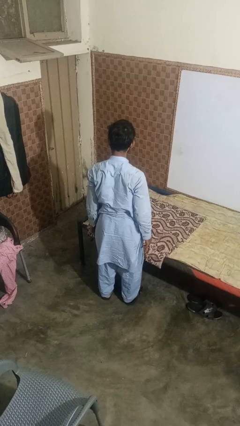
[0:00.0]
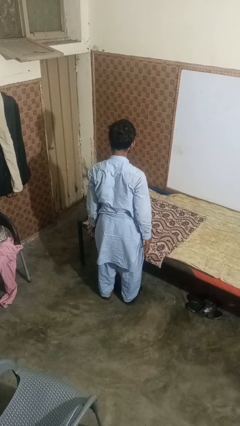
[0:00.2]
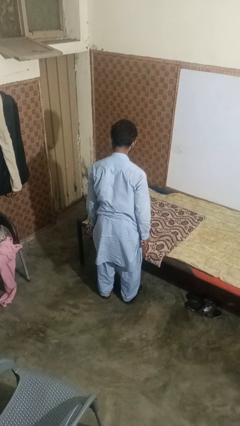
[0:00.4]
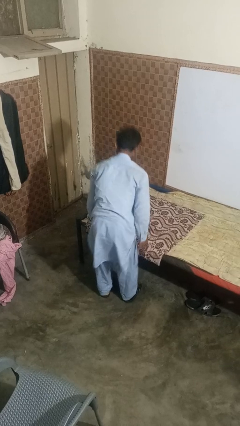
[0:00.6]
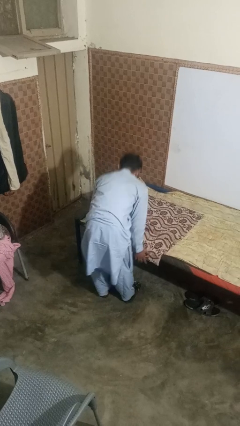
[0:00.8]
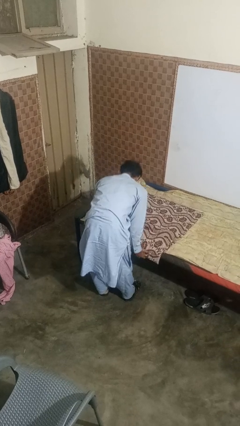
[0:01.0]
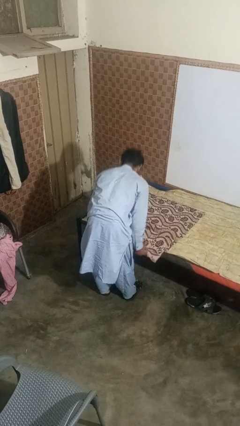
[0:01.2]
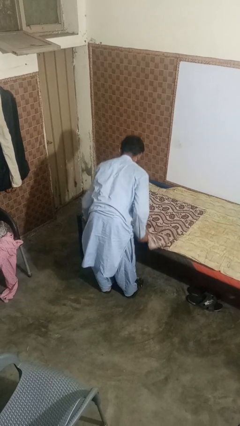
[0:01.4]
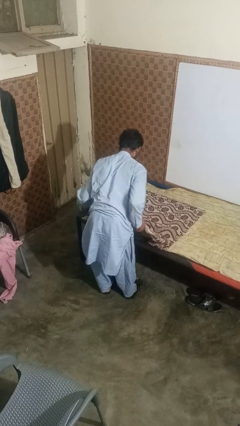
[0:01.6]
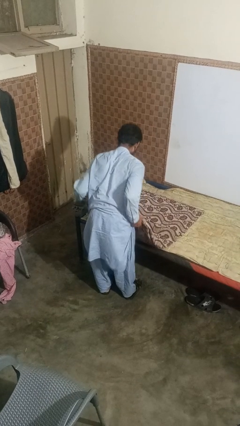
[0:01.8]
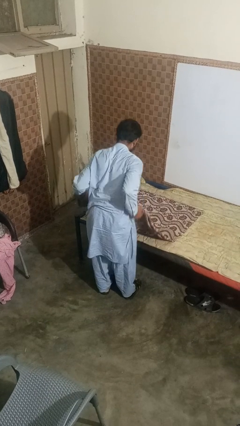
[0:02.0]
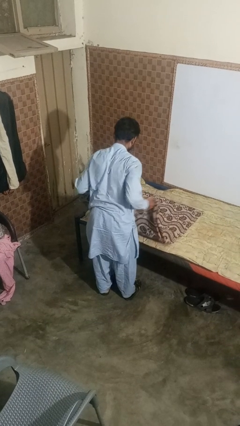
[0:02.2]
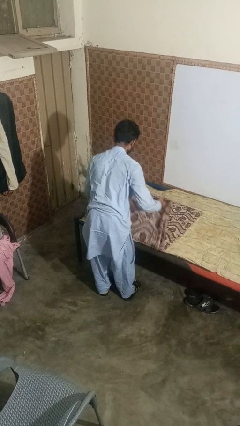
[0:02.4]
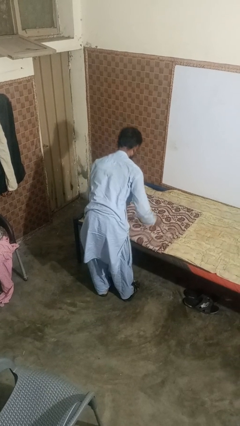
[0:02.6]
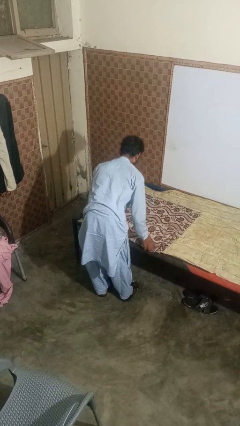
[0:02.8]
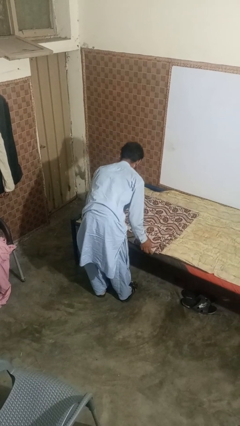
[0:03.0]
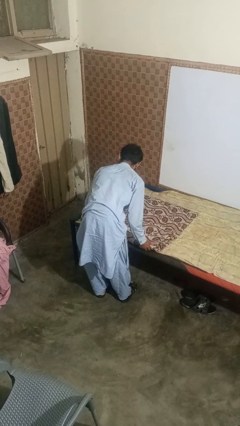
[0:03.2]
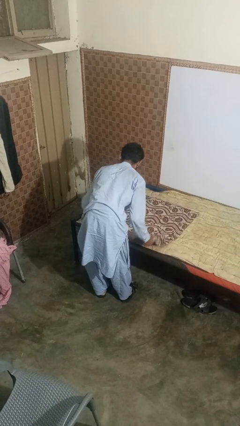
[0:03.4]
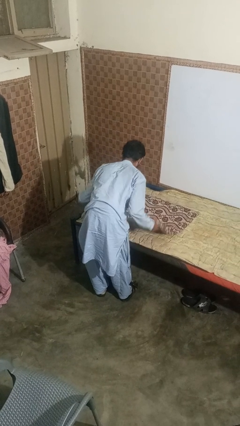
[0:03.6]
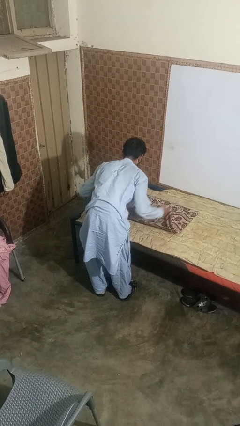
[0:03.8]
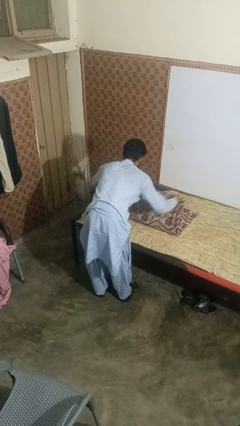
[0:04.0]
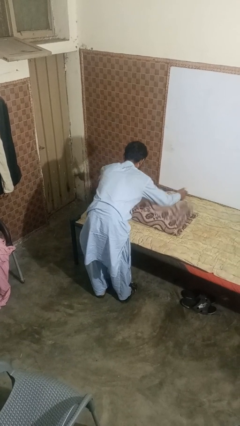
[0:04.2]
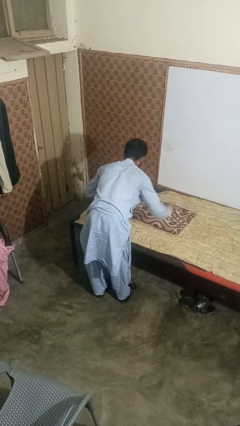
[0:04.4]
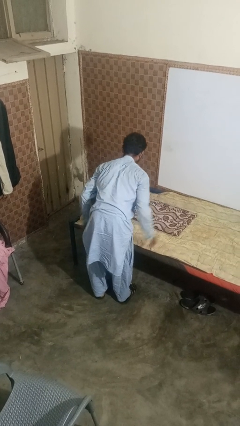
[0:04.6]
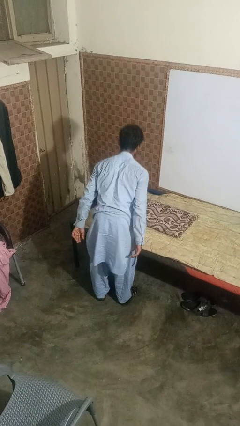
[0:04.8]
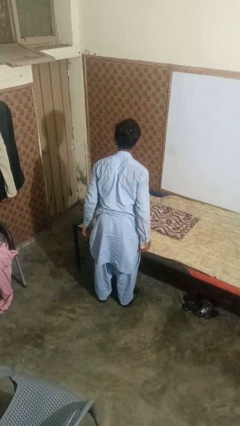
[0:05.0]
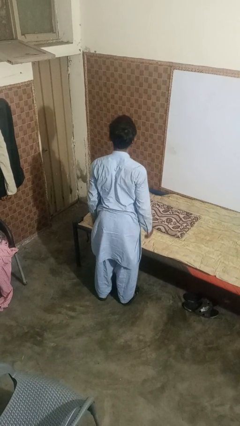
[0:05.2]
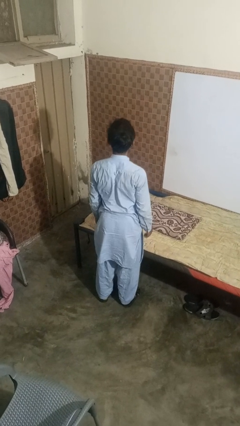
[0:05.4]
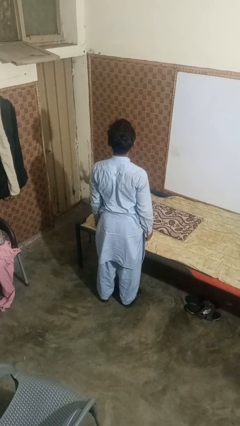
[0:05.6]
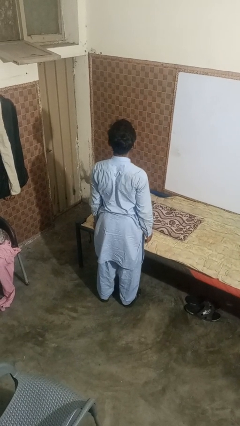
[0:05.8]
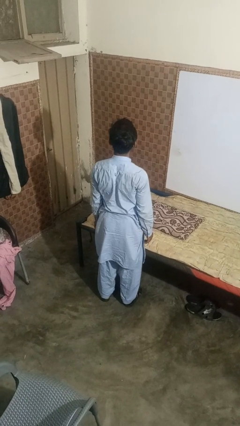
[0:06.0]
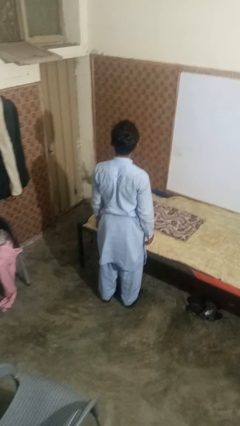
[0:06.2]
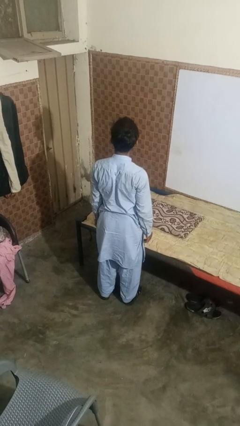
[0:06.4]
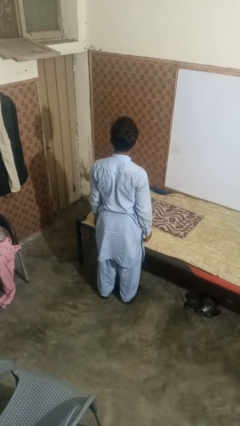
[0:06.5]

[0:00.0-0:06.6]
person folds blanket

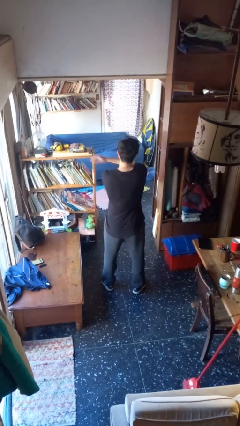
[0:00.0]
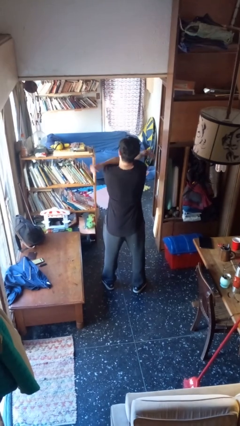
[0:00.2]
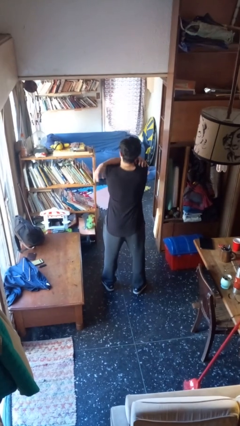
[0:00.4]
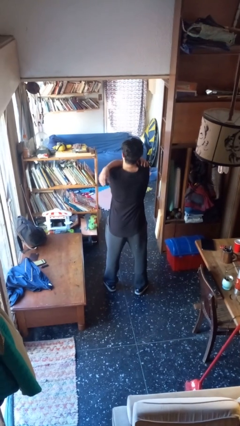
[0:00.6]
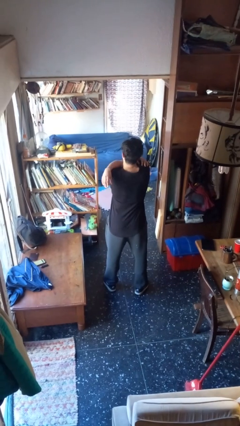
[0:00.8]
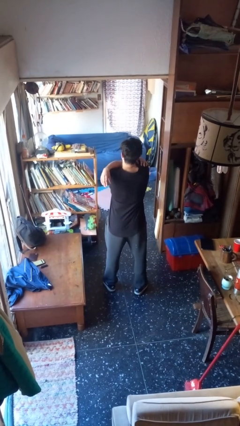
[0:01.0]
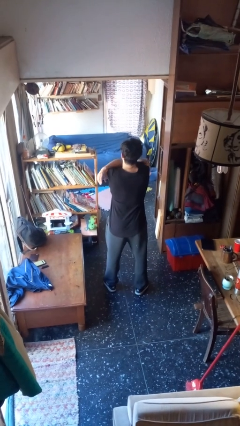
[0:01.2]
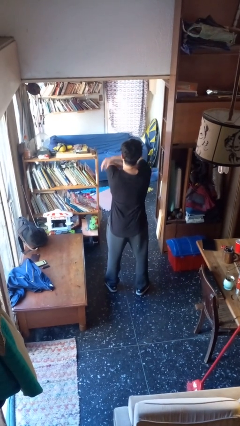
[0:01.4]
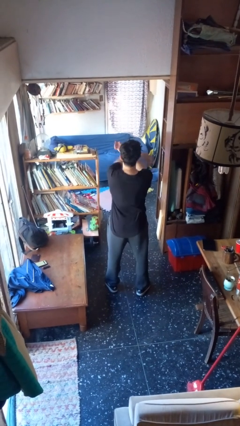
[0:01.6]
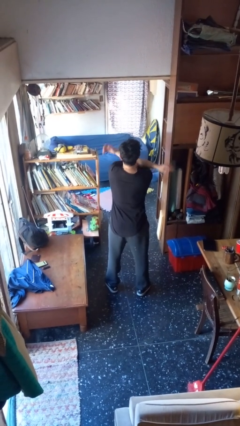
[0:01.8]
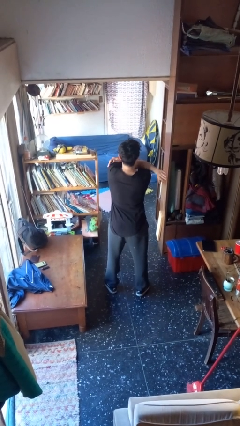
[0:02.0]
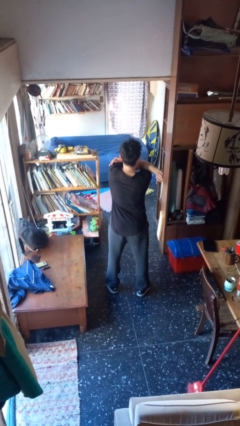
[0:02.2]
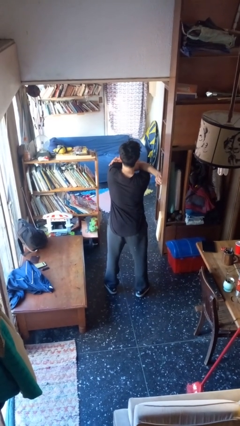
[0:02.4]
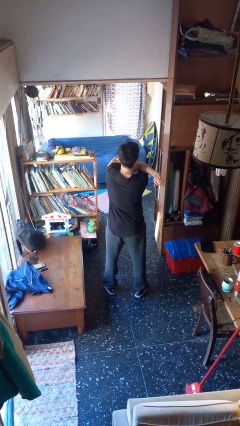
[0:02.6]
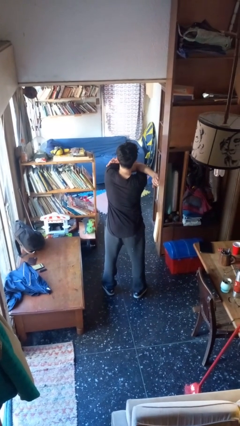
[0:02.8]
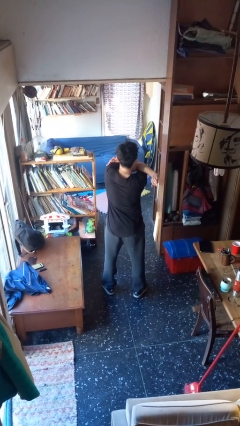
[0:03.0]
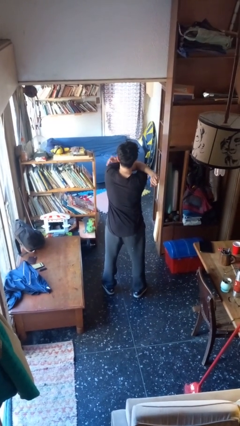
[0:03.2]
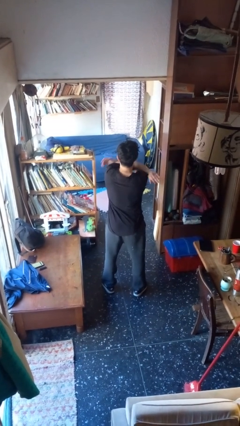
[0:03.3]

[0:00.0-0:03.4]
person stretches arms to side

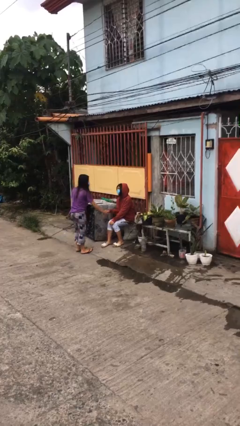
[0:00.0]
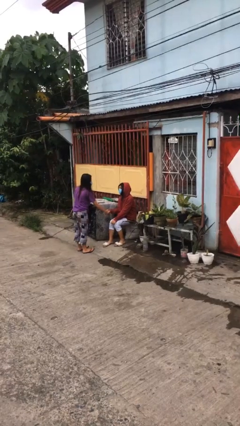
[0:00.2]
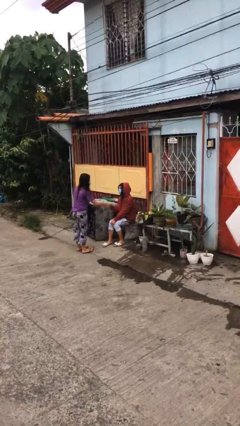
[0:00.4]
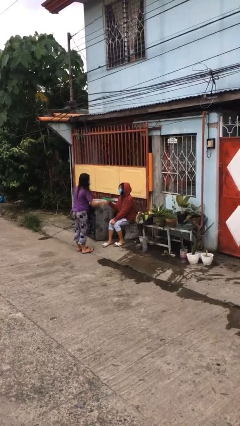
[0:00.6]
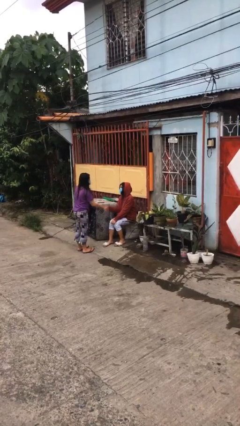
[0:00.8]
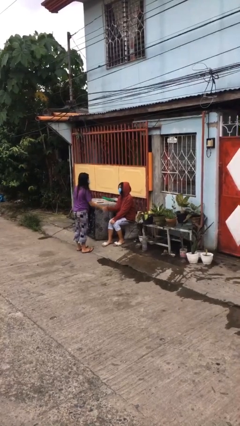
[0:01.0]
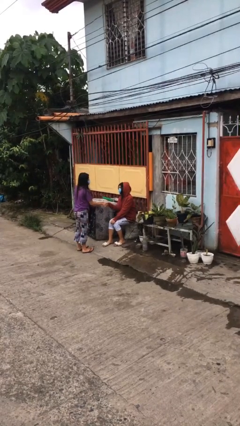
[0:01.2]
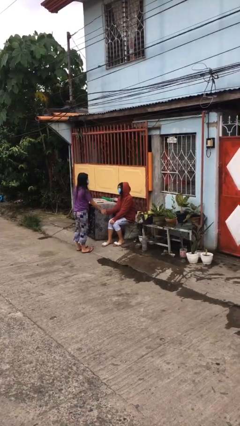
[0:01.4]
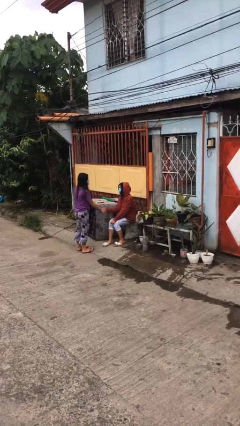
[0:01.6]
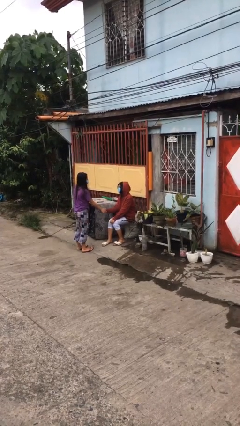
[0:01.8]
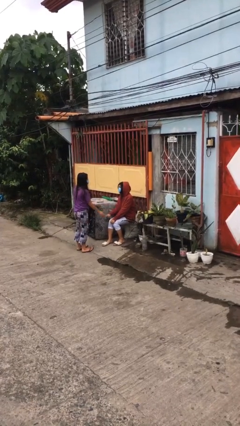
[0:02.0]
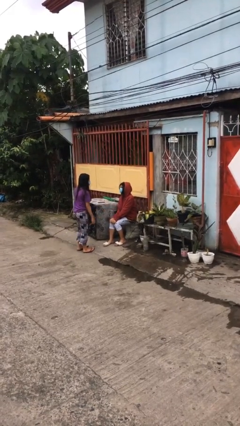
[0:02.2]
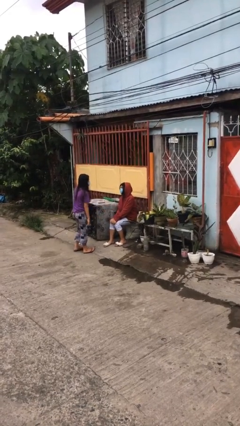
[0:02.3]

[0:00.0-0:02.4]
person shakes hand

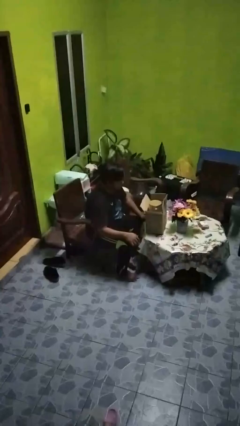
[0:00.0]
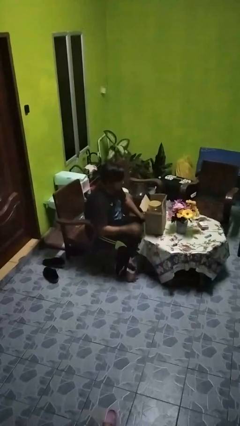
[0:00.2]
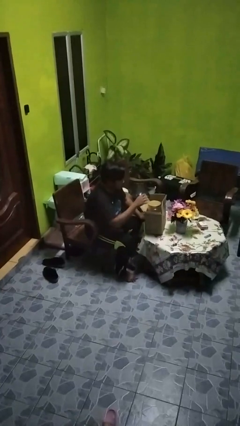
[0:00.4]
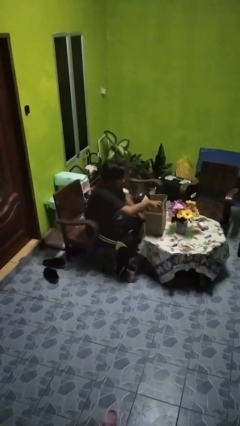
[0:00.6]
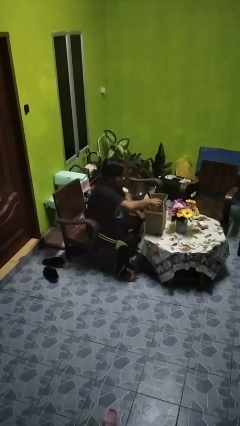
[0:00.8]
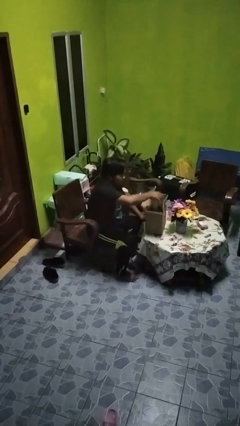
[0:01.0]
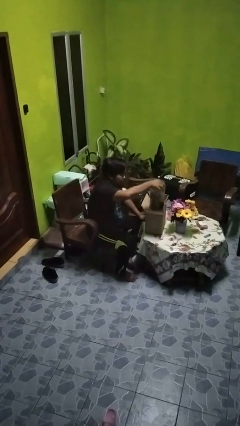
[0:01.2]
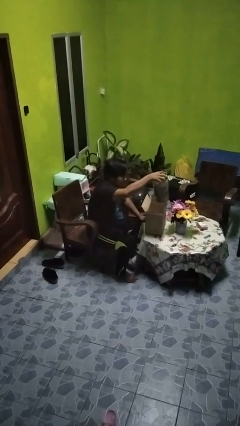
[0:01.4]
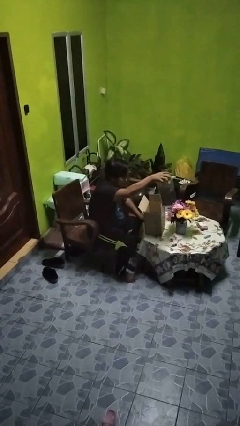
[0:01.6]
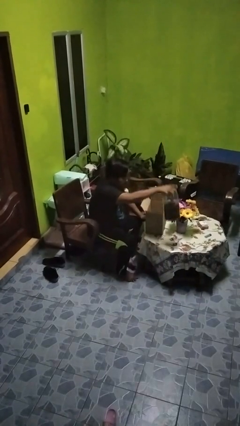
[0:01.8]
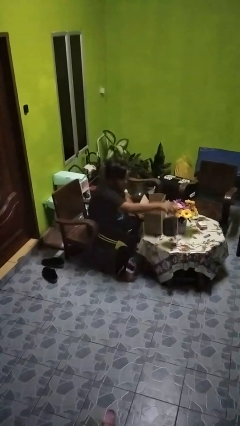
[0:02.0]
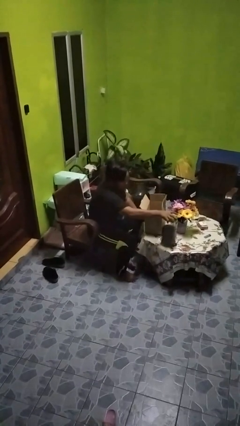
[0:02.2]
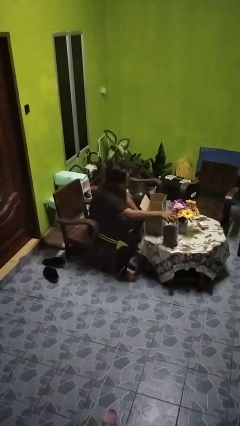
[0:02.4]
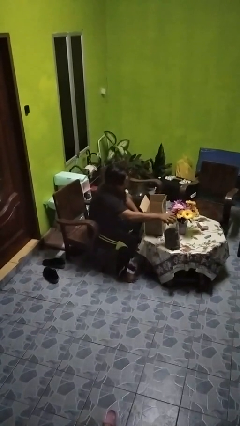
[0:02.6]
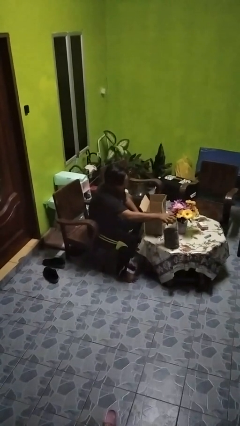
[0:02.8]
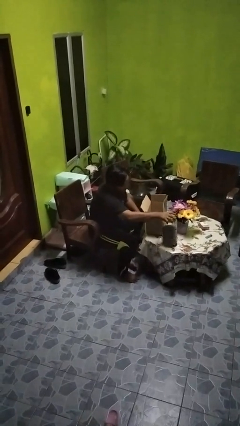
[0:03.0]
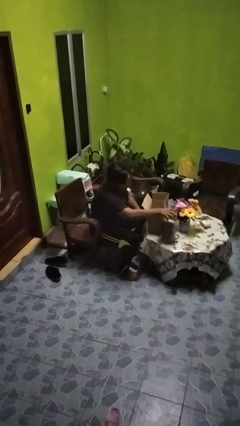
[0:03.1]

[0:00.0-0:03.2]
person takes object from box

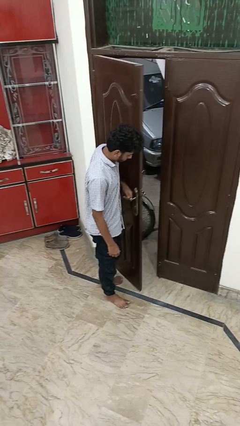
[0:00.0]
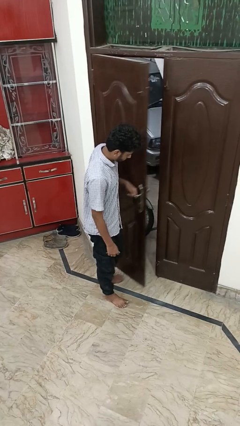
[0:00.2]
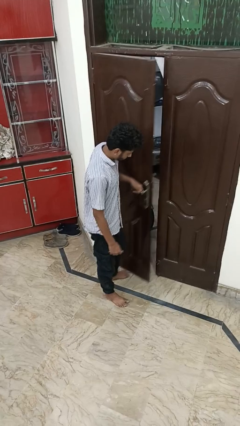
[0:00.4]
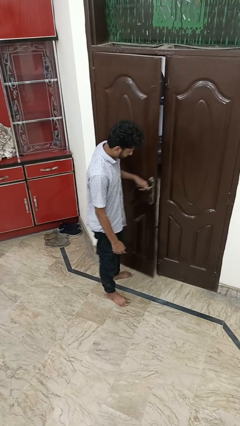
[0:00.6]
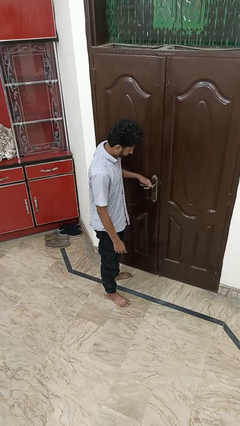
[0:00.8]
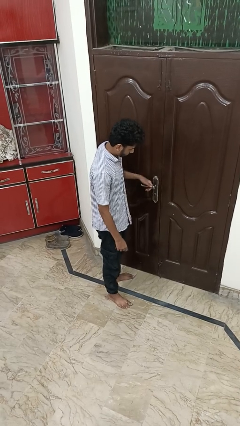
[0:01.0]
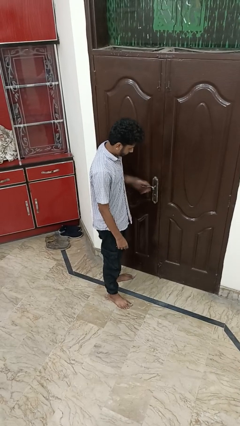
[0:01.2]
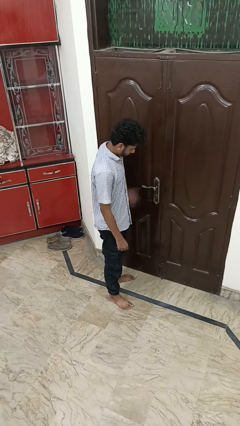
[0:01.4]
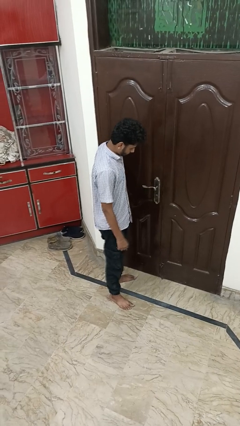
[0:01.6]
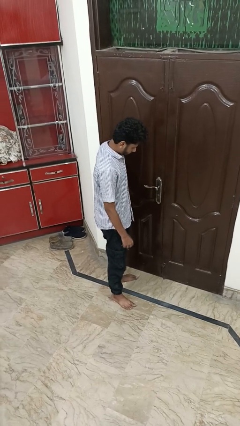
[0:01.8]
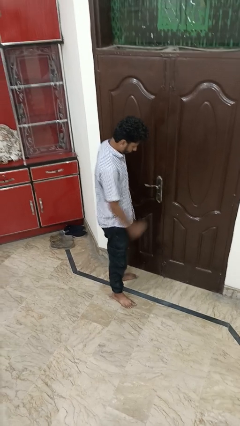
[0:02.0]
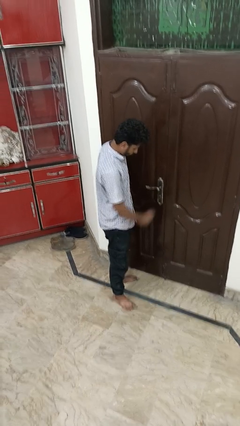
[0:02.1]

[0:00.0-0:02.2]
person closes facility door
